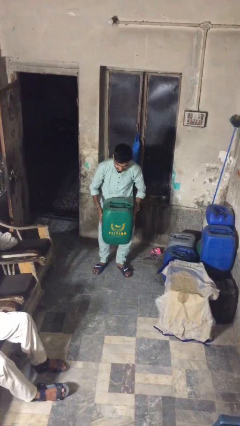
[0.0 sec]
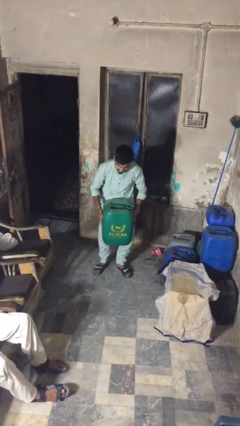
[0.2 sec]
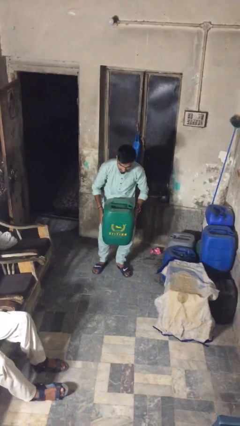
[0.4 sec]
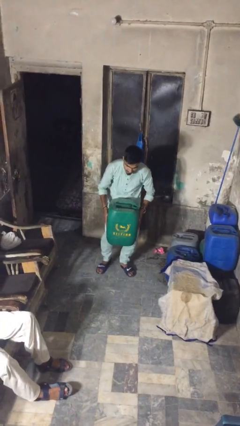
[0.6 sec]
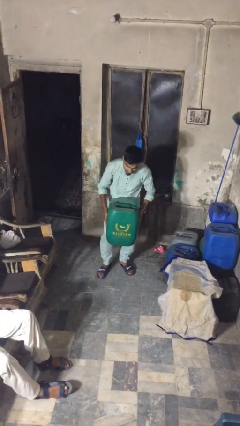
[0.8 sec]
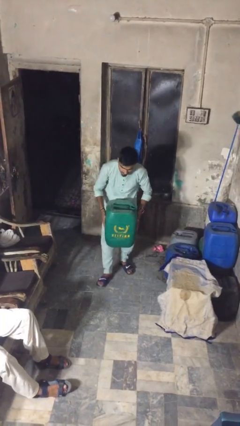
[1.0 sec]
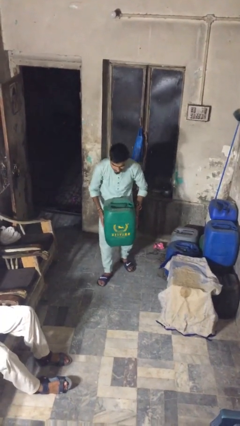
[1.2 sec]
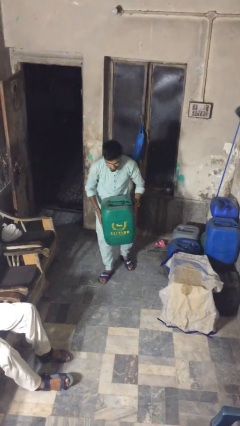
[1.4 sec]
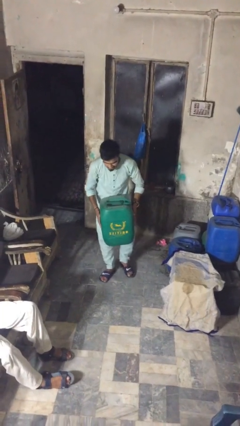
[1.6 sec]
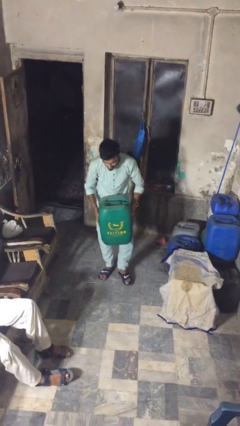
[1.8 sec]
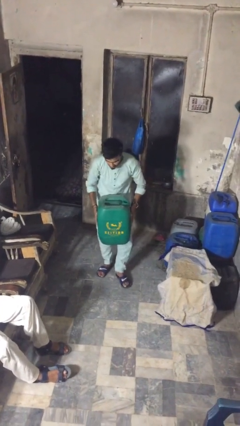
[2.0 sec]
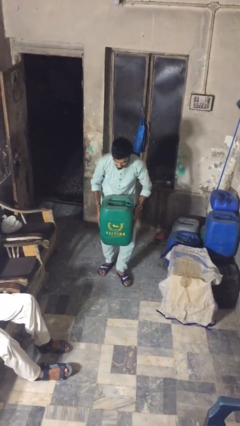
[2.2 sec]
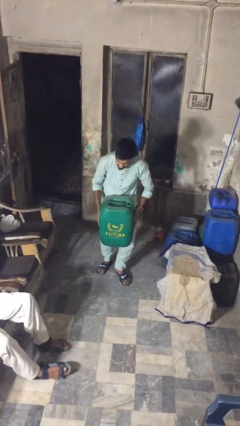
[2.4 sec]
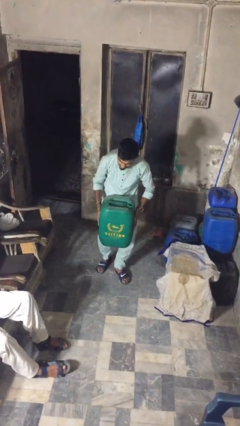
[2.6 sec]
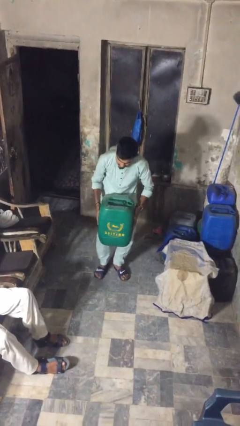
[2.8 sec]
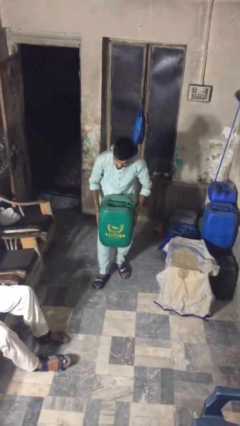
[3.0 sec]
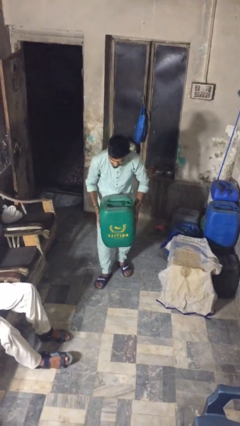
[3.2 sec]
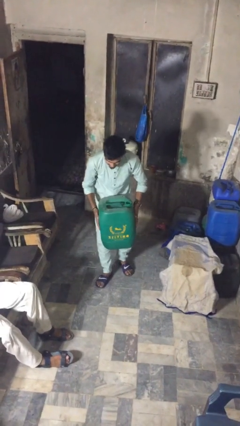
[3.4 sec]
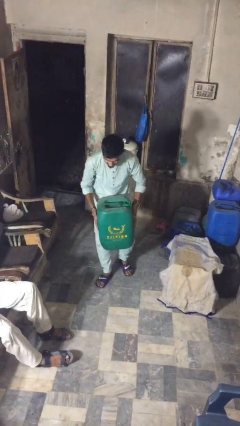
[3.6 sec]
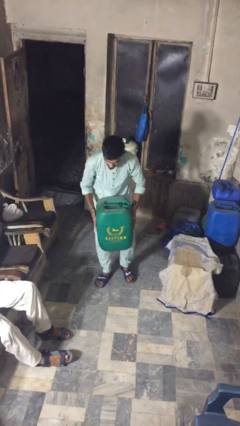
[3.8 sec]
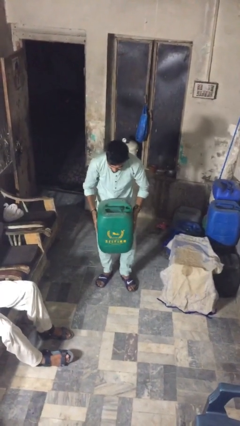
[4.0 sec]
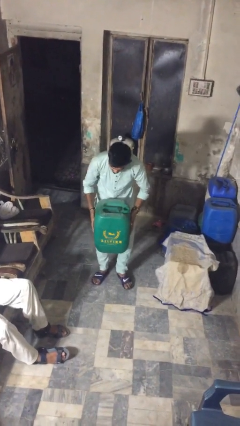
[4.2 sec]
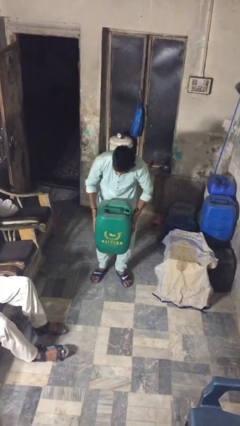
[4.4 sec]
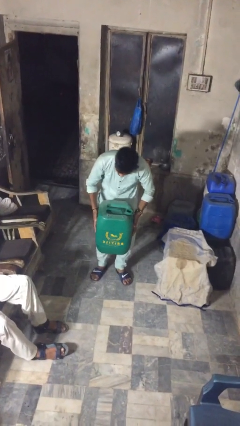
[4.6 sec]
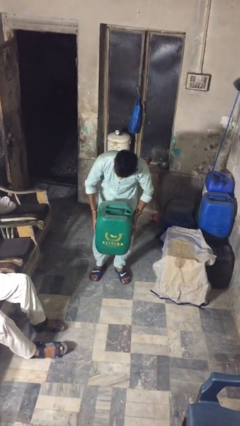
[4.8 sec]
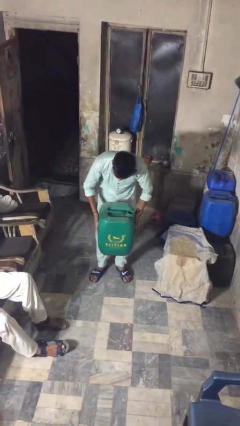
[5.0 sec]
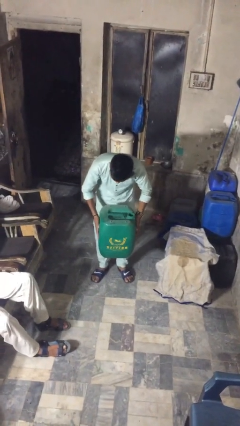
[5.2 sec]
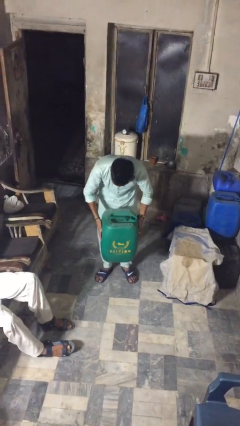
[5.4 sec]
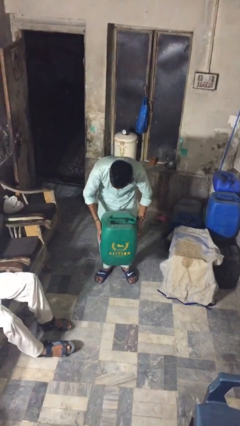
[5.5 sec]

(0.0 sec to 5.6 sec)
person carries heavy object

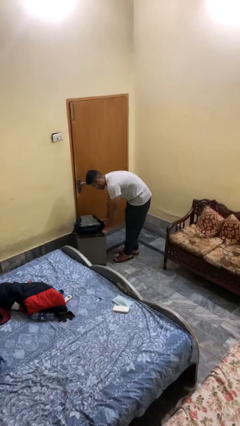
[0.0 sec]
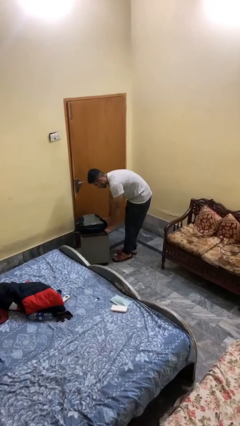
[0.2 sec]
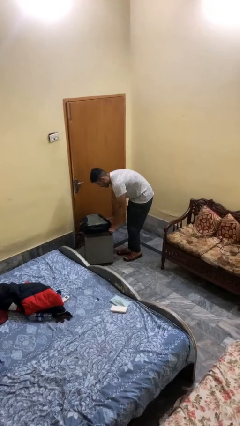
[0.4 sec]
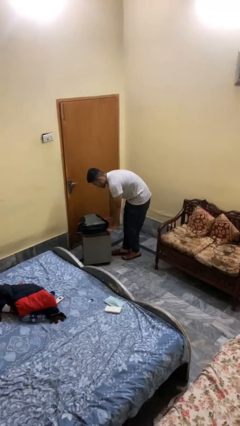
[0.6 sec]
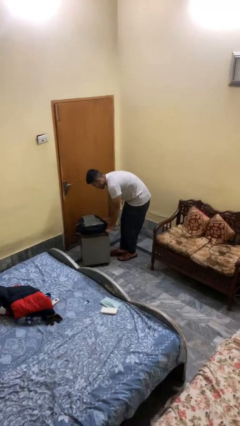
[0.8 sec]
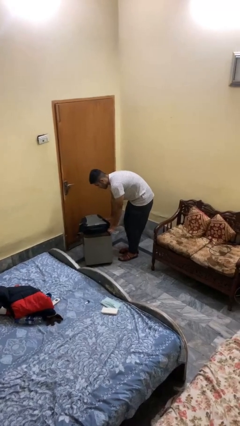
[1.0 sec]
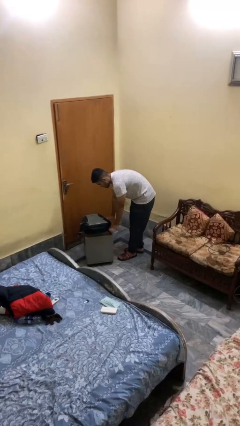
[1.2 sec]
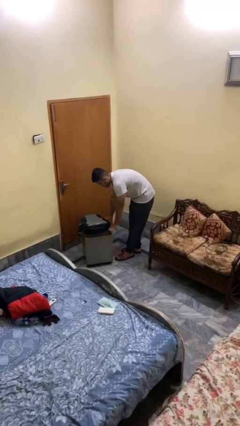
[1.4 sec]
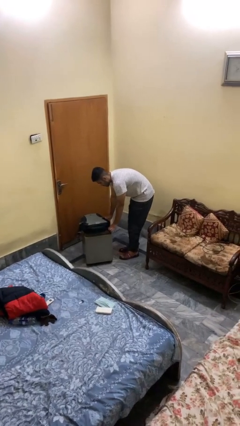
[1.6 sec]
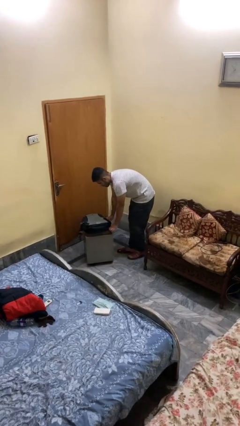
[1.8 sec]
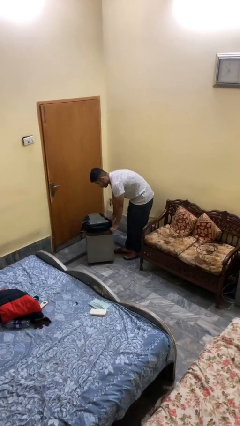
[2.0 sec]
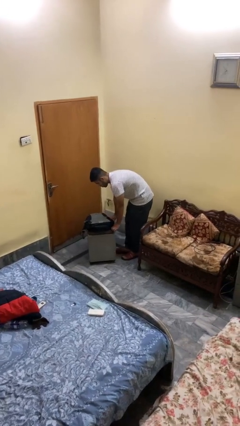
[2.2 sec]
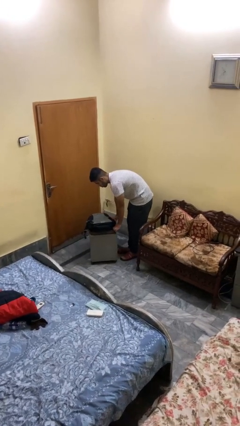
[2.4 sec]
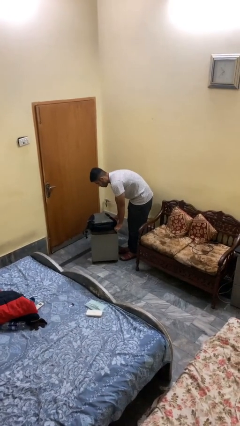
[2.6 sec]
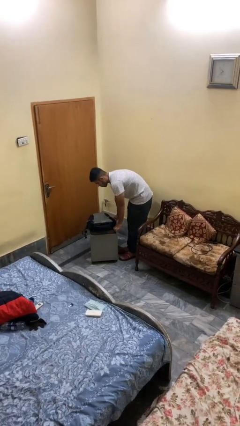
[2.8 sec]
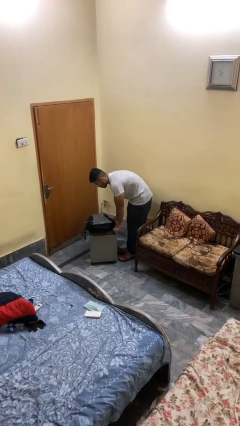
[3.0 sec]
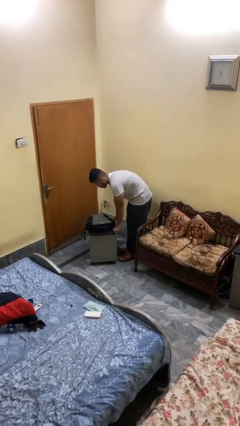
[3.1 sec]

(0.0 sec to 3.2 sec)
person pulls wheeled cart

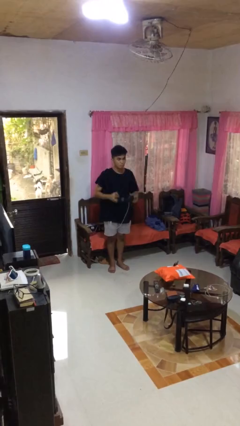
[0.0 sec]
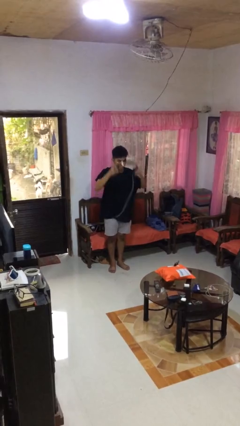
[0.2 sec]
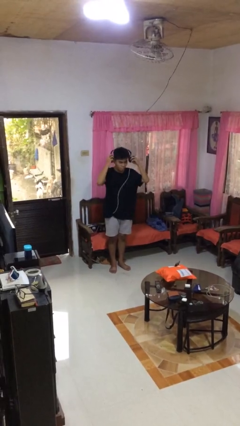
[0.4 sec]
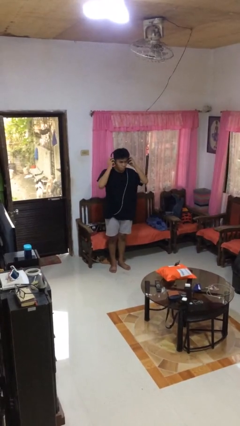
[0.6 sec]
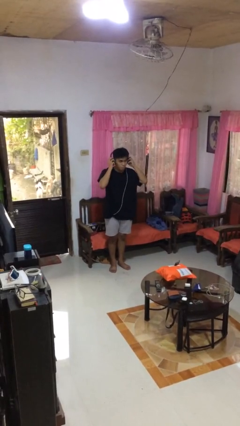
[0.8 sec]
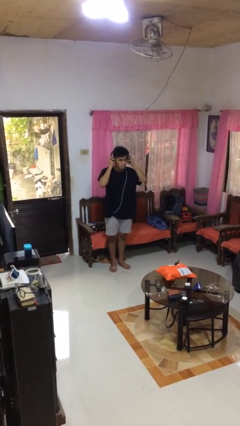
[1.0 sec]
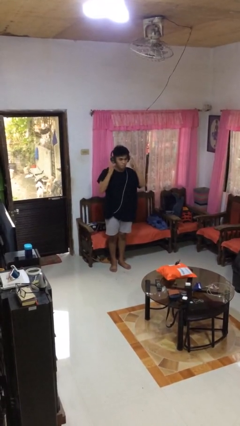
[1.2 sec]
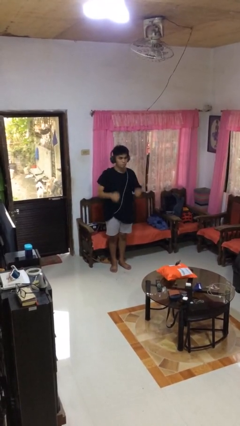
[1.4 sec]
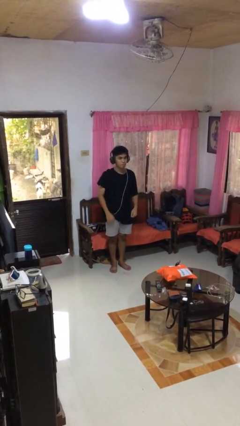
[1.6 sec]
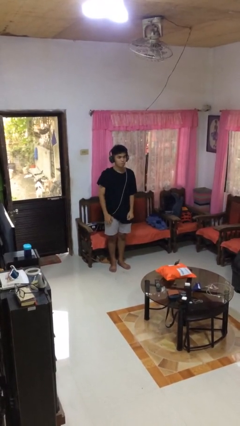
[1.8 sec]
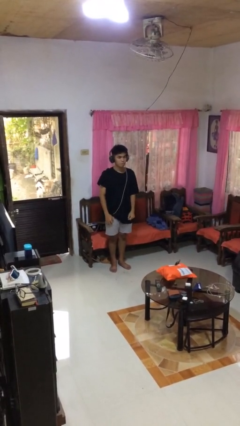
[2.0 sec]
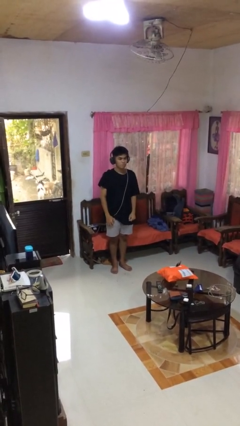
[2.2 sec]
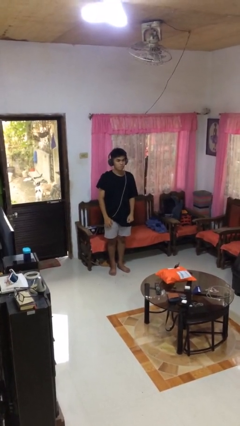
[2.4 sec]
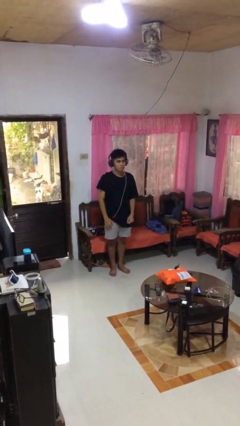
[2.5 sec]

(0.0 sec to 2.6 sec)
person puts on headphones

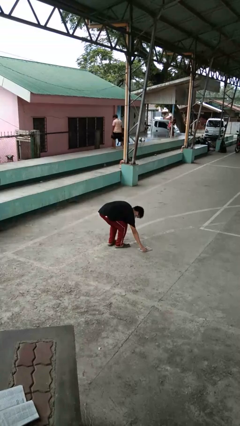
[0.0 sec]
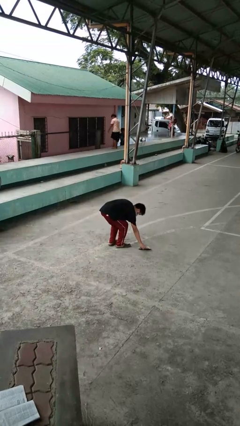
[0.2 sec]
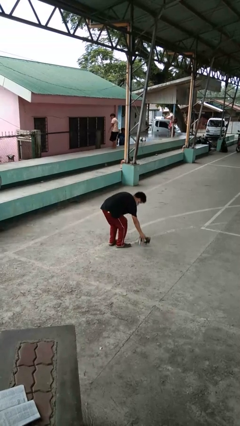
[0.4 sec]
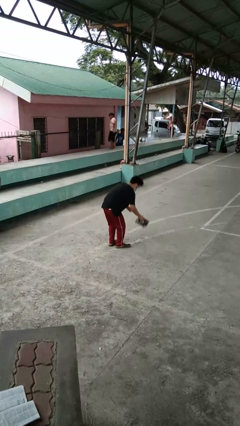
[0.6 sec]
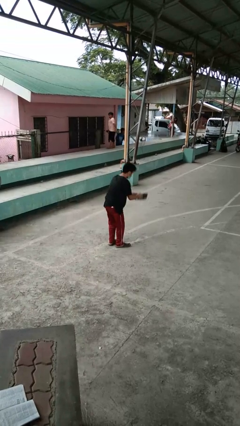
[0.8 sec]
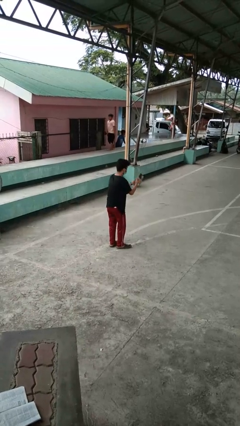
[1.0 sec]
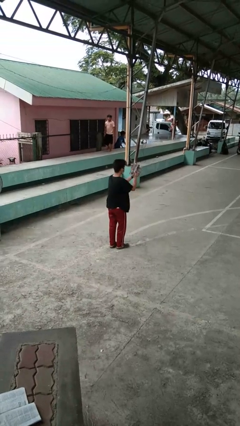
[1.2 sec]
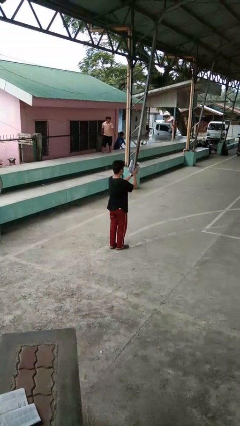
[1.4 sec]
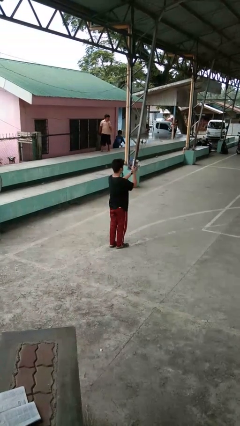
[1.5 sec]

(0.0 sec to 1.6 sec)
person picks up object from floor

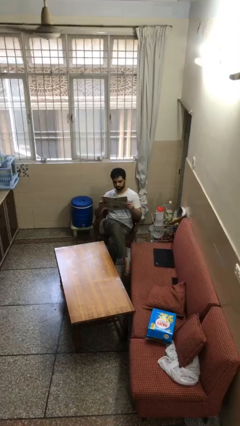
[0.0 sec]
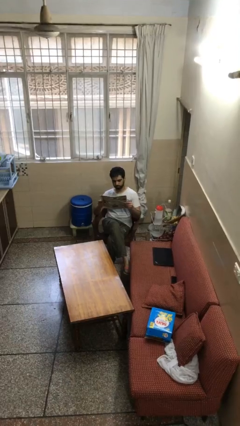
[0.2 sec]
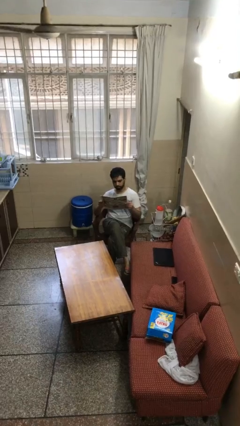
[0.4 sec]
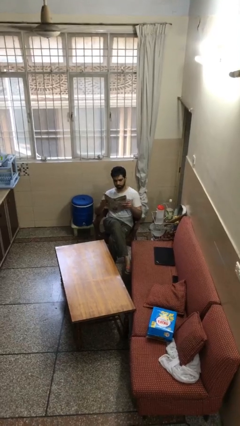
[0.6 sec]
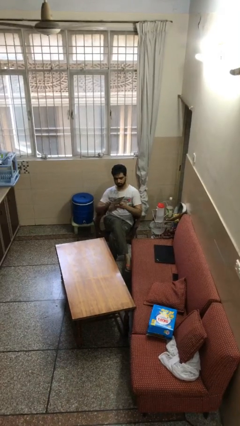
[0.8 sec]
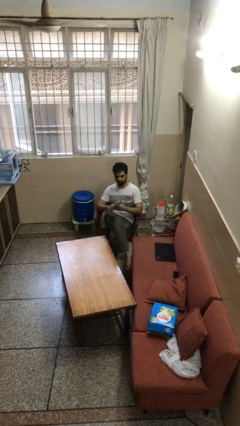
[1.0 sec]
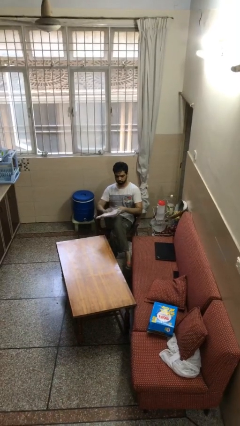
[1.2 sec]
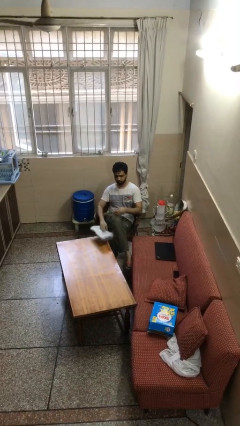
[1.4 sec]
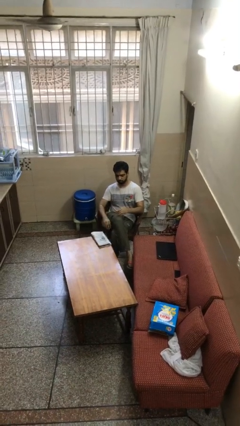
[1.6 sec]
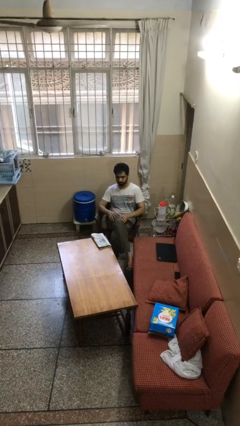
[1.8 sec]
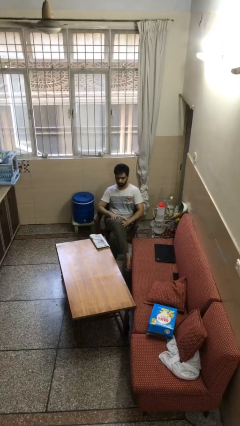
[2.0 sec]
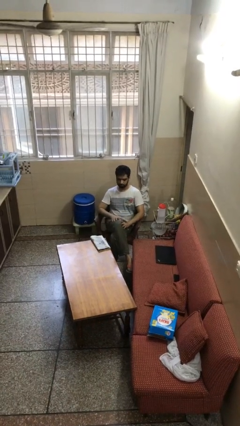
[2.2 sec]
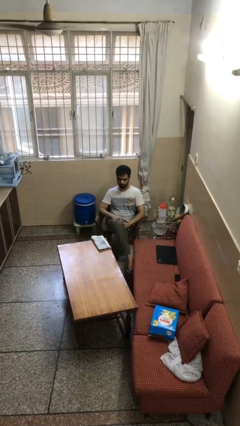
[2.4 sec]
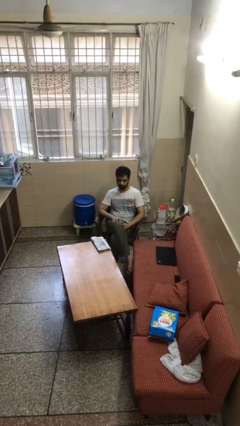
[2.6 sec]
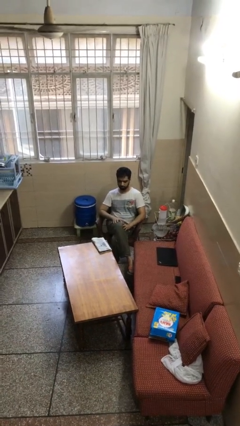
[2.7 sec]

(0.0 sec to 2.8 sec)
person puts down object on table

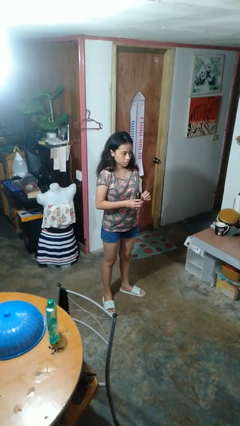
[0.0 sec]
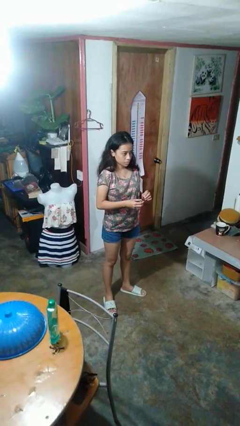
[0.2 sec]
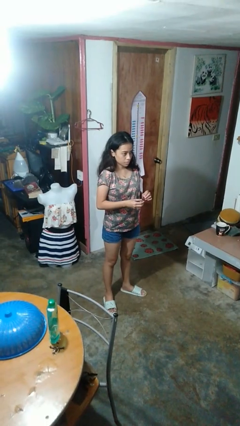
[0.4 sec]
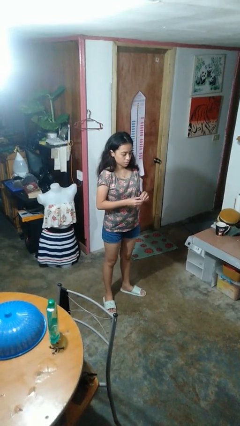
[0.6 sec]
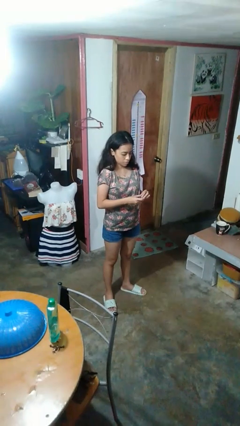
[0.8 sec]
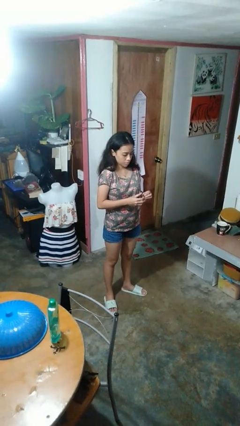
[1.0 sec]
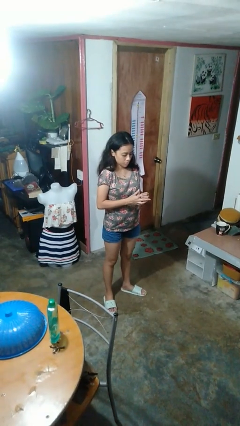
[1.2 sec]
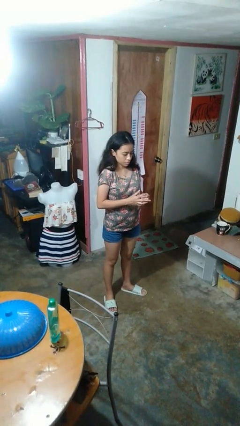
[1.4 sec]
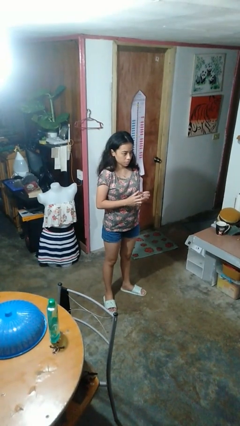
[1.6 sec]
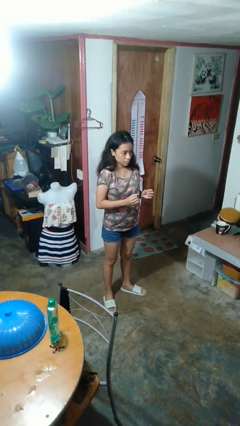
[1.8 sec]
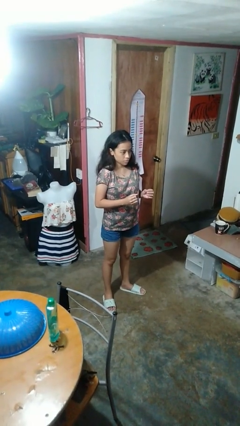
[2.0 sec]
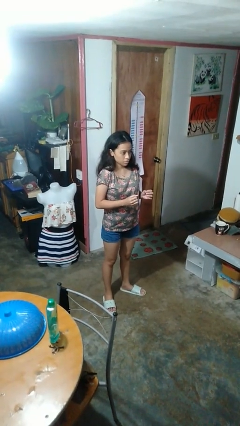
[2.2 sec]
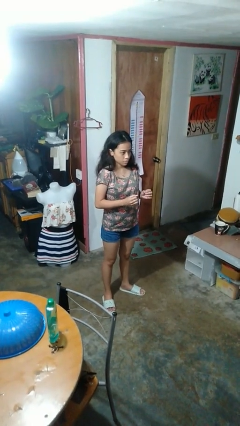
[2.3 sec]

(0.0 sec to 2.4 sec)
person puts on ring
